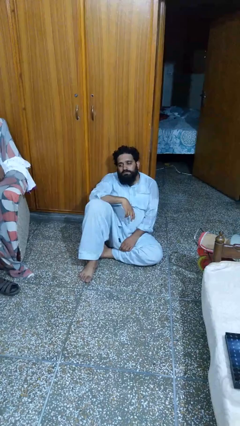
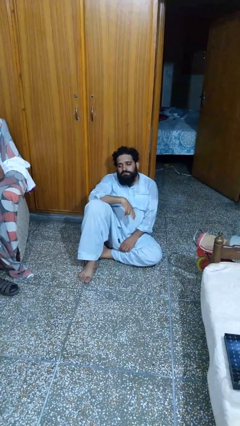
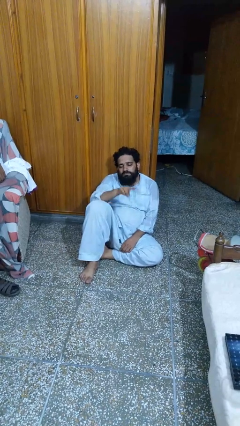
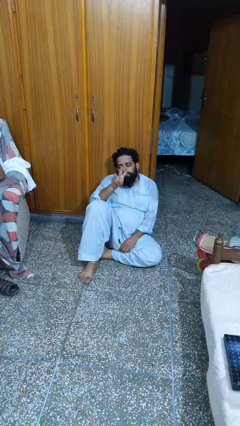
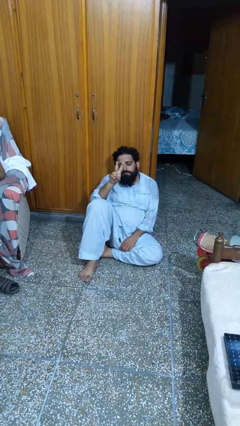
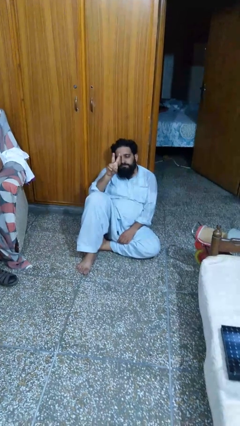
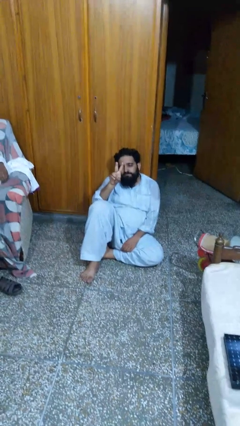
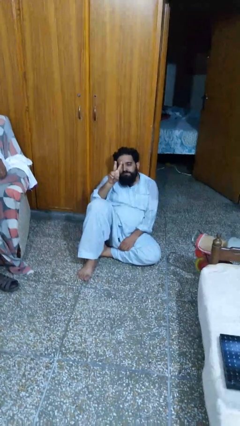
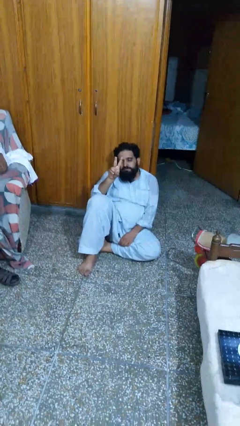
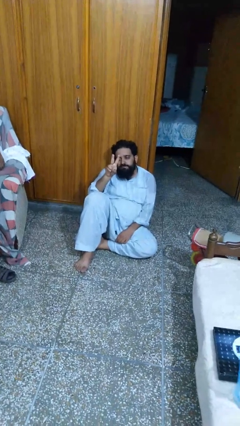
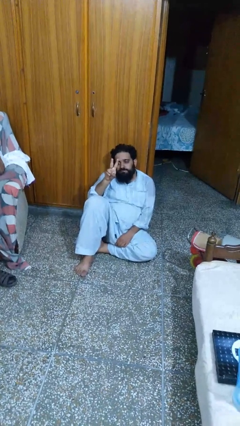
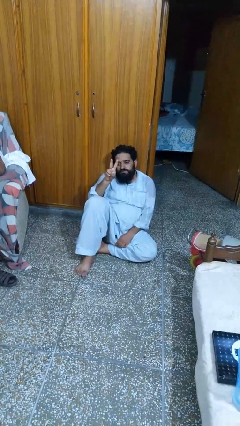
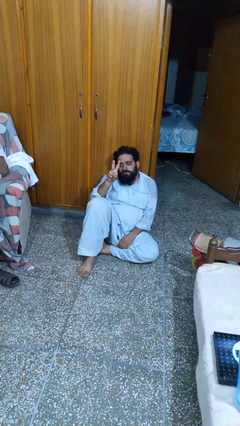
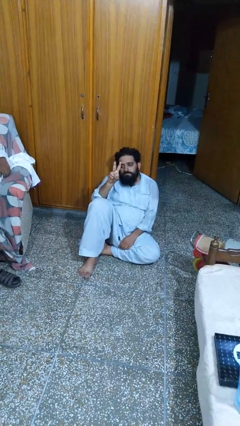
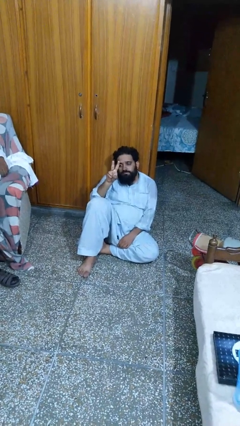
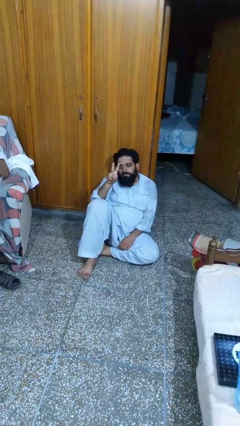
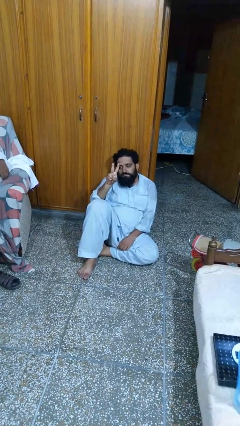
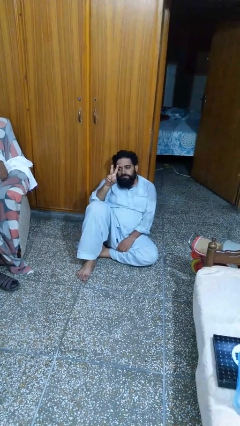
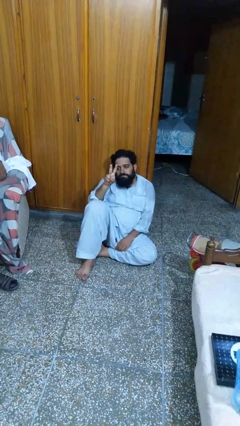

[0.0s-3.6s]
person gestures peace

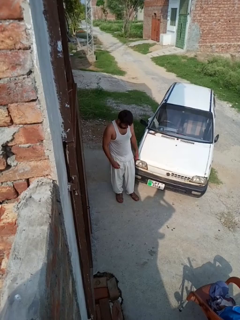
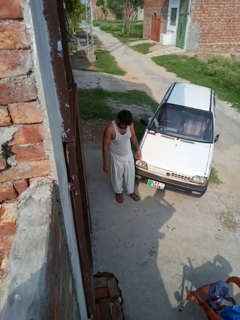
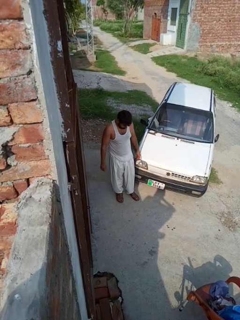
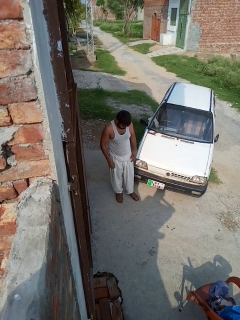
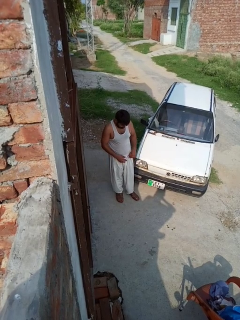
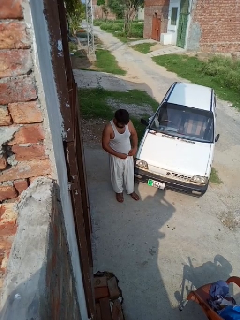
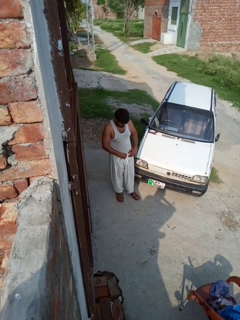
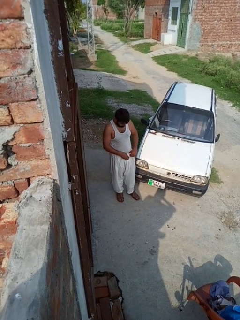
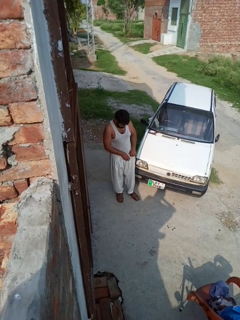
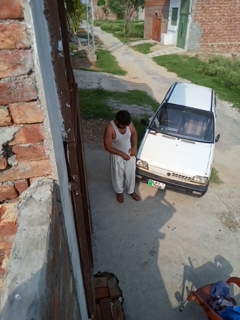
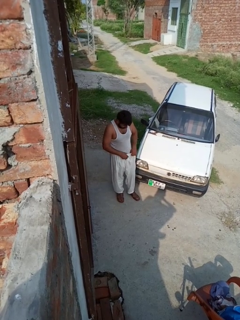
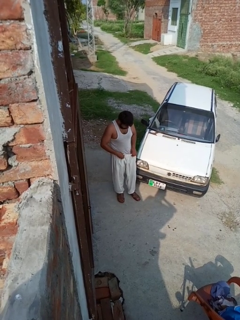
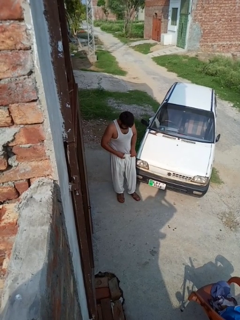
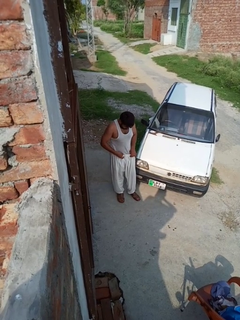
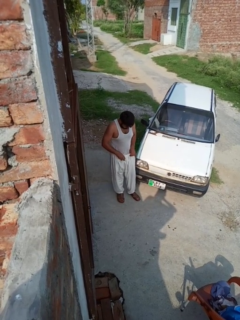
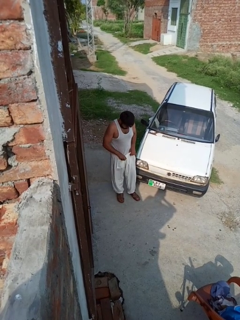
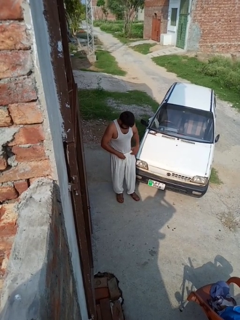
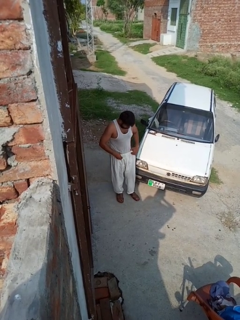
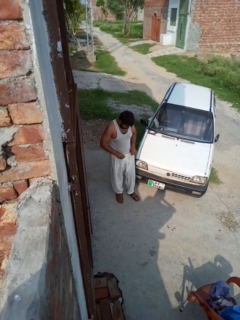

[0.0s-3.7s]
person tucks in shirt

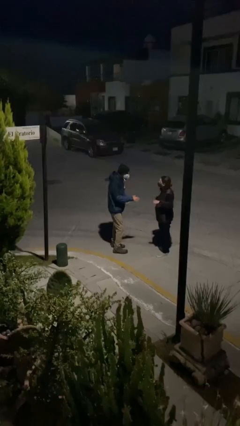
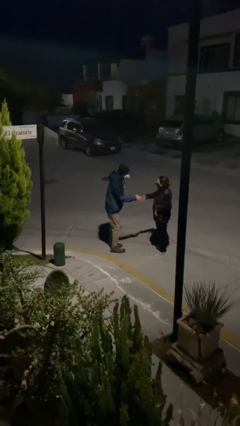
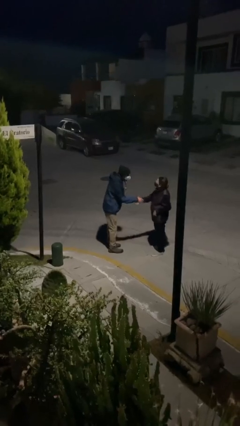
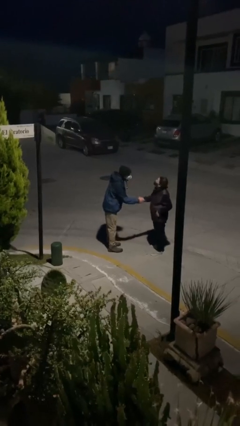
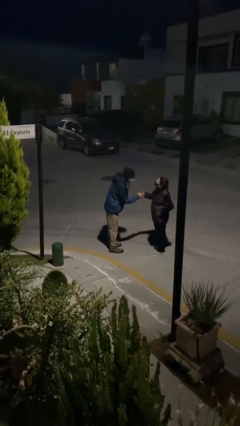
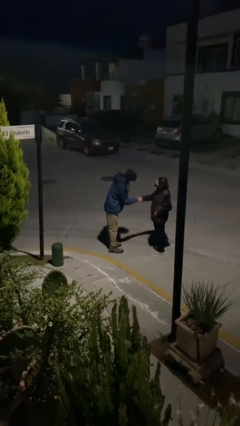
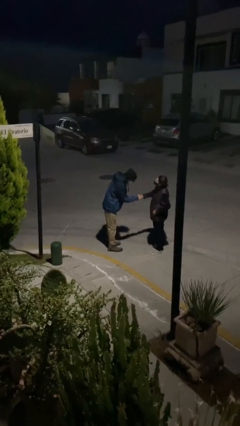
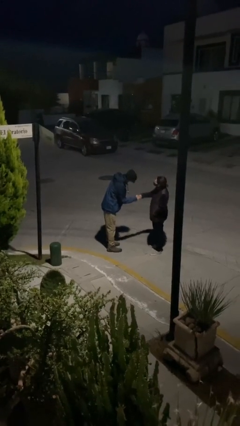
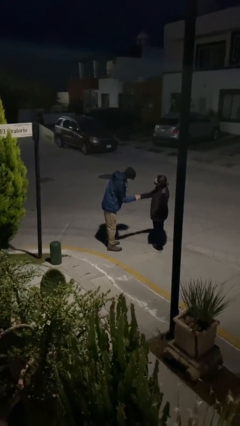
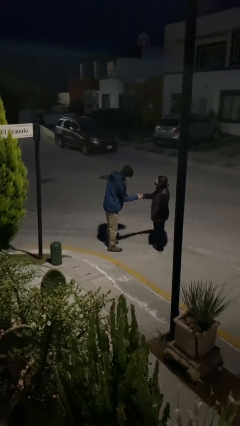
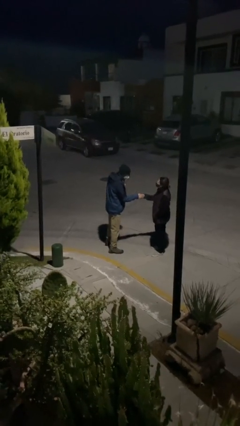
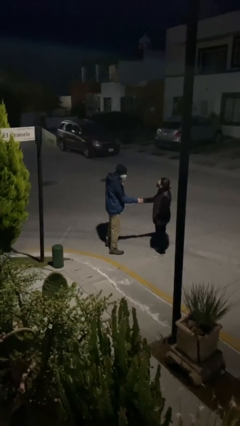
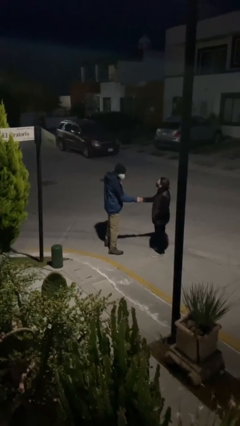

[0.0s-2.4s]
person shakes hand

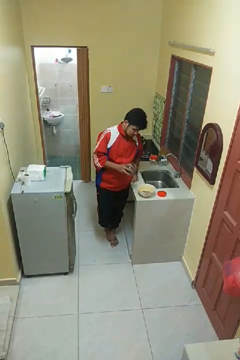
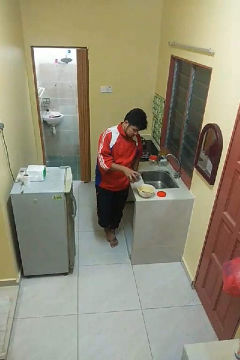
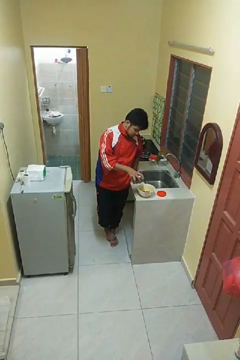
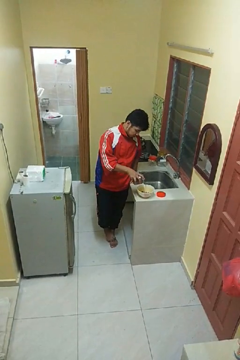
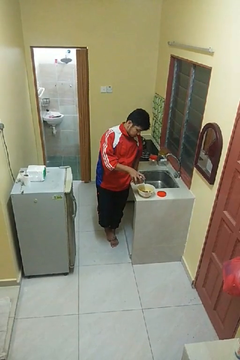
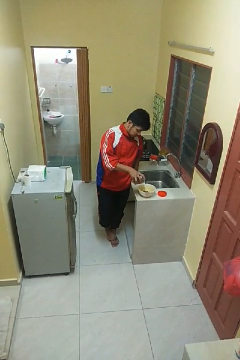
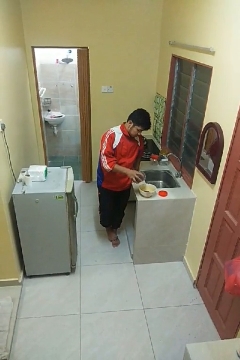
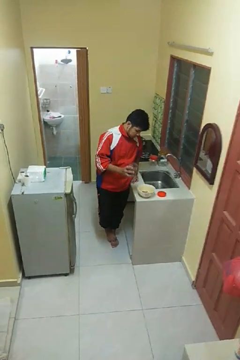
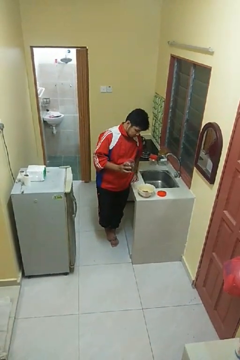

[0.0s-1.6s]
person pours into bowl

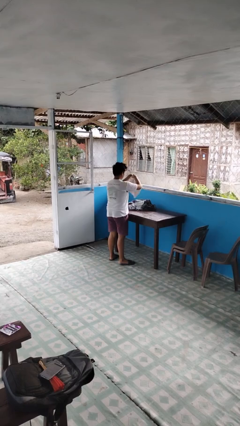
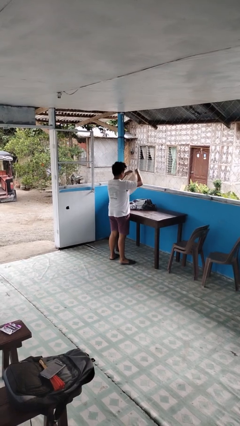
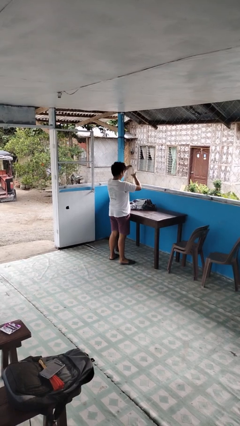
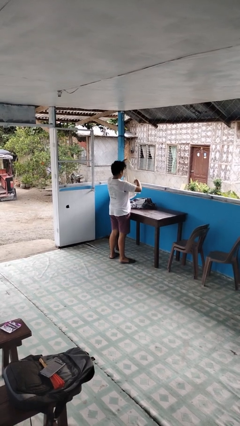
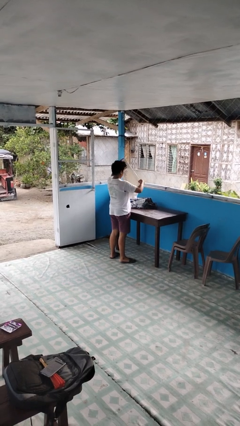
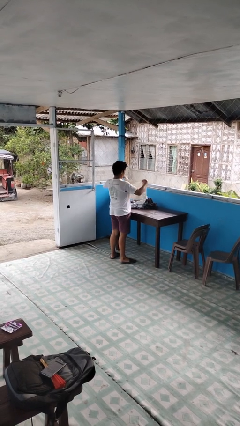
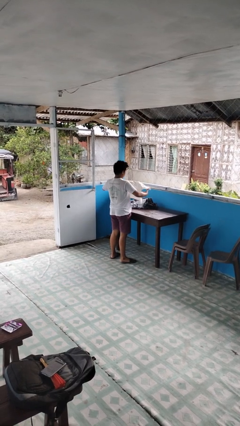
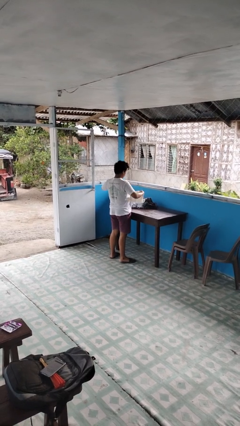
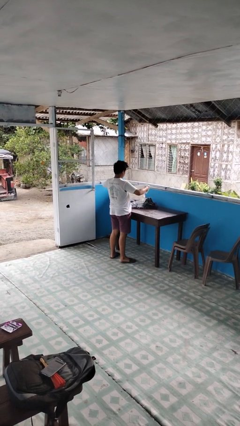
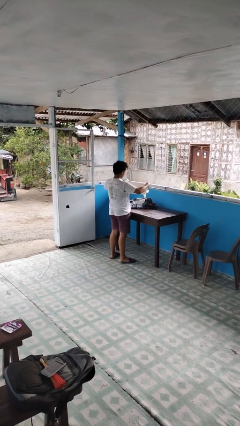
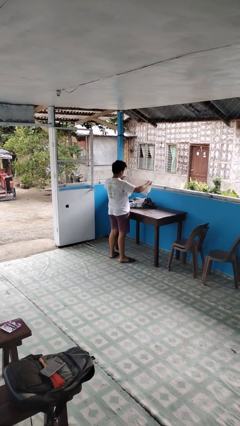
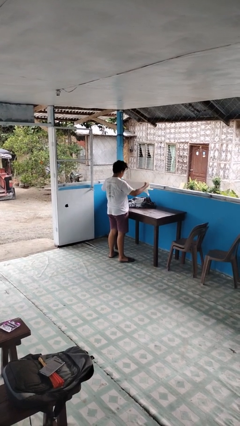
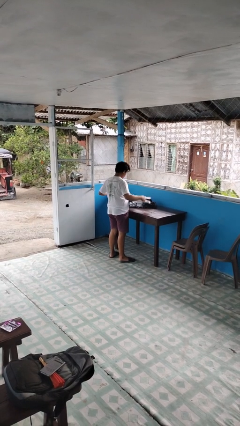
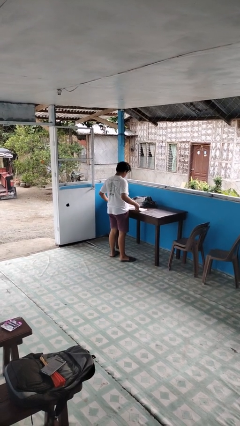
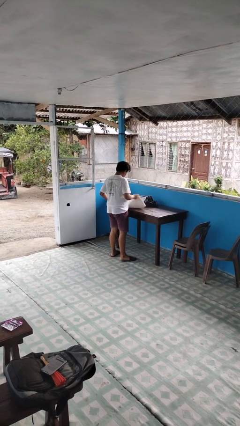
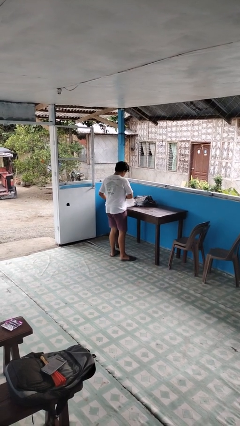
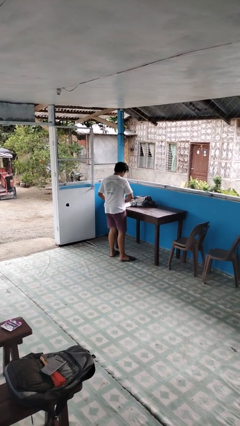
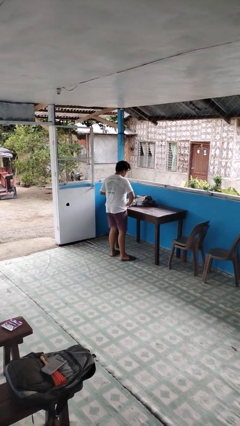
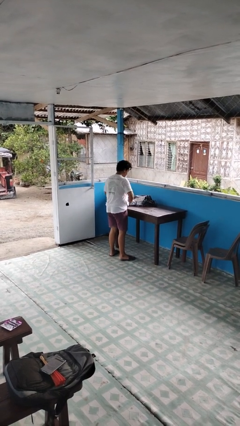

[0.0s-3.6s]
person folds shirt

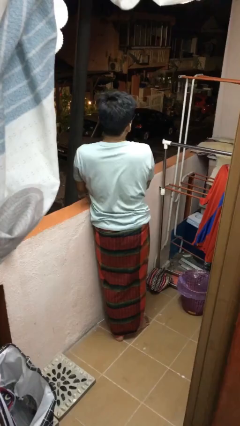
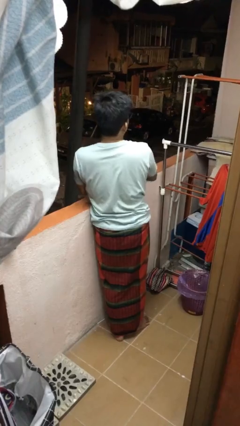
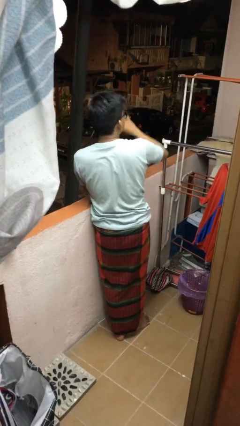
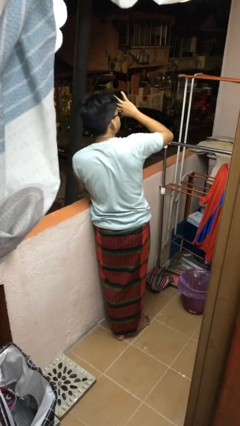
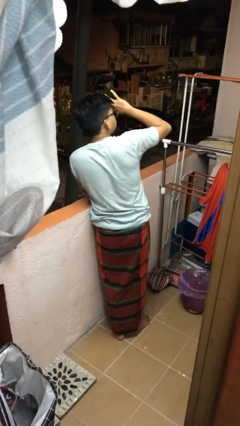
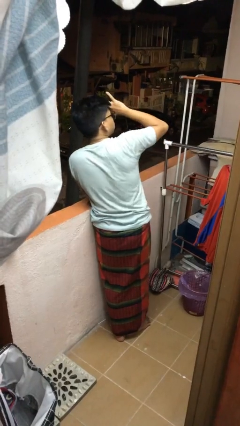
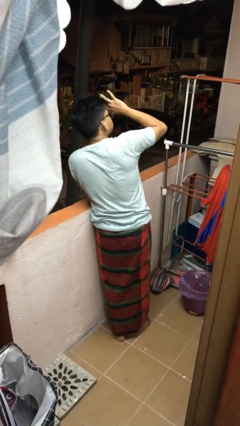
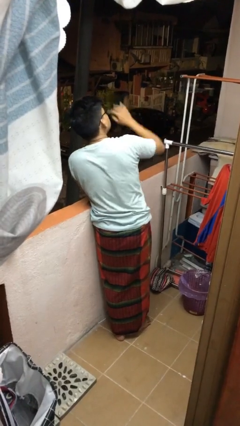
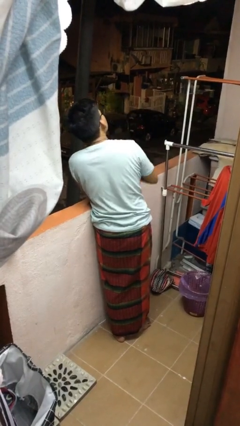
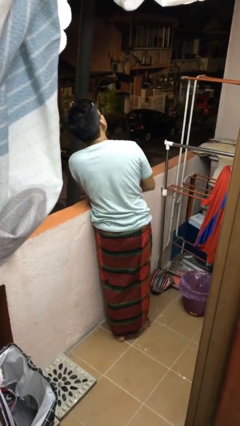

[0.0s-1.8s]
person shades eyes

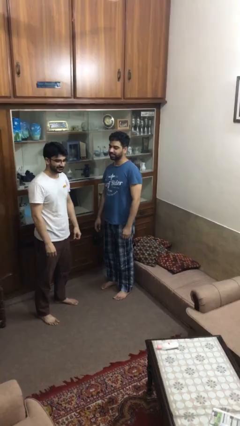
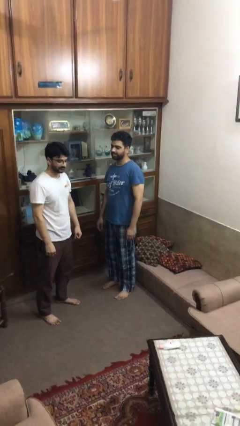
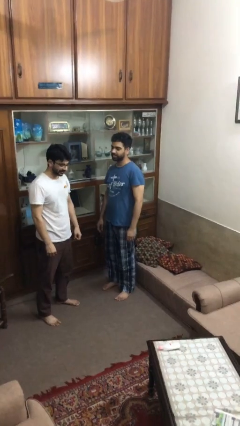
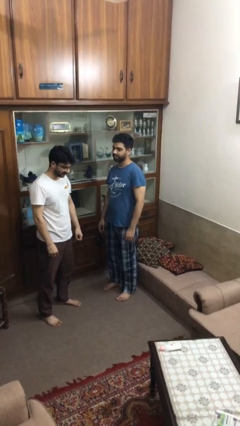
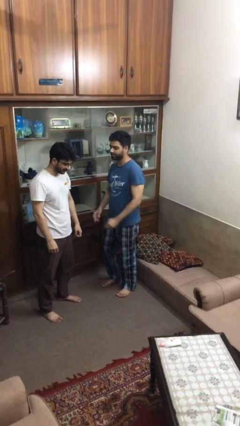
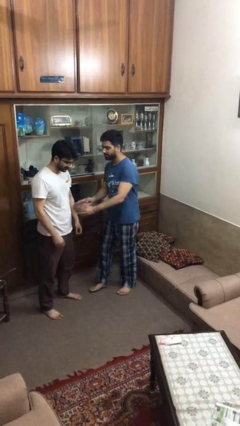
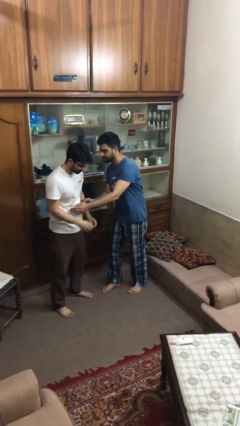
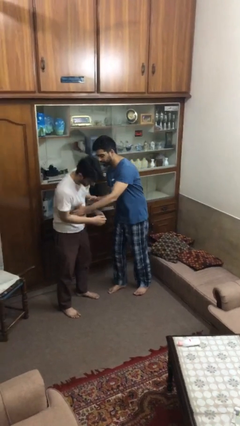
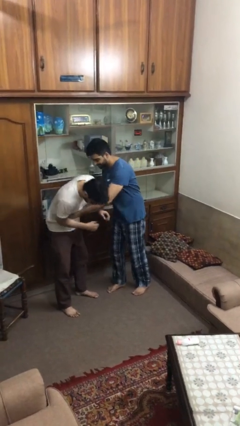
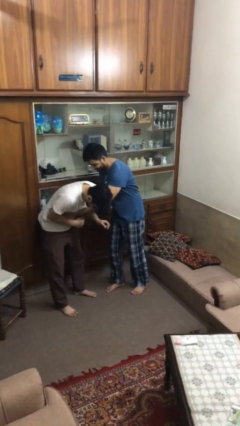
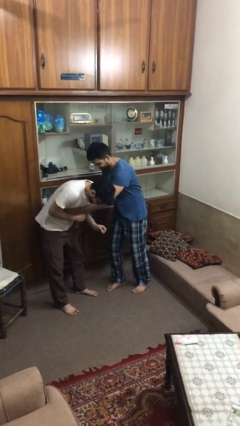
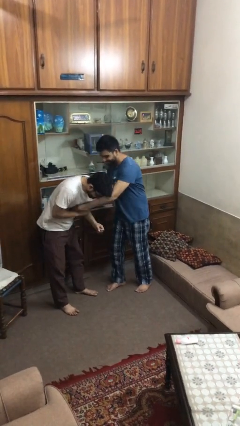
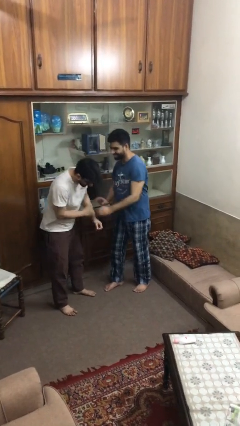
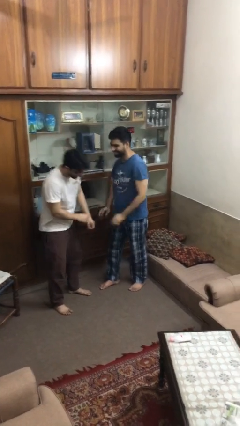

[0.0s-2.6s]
person tickles person
